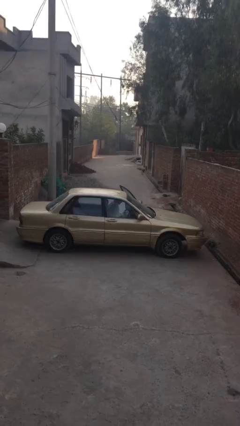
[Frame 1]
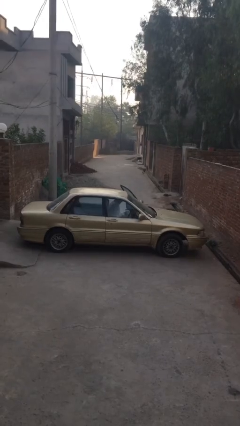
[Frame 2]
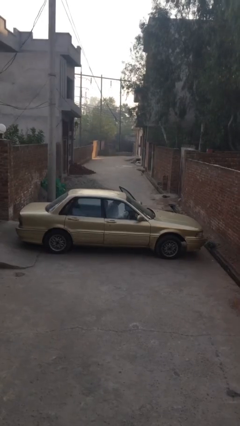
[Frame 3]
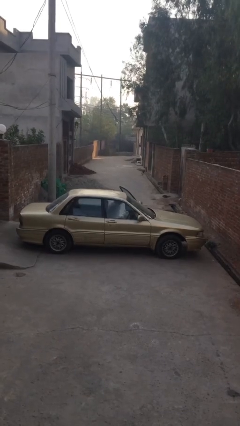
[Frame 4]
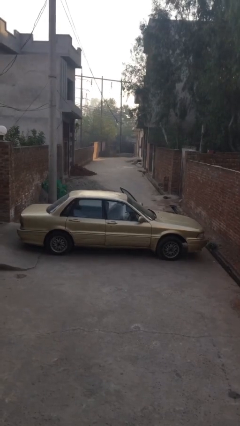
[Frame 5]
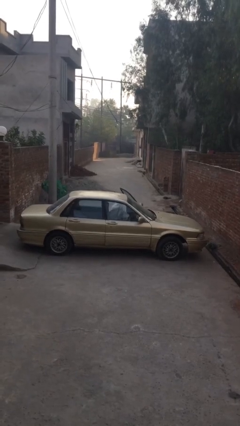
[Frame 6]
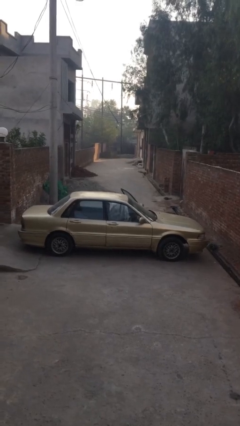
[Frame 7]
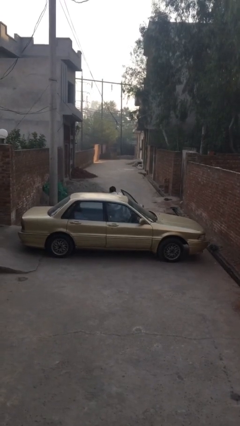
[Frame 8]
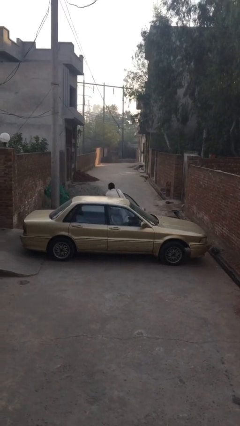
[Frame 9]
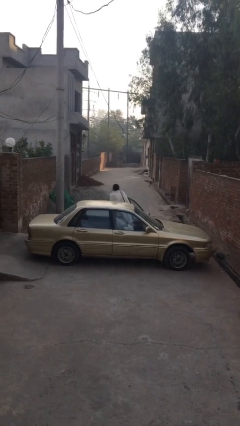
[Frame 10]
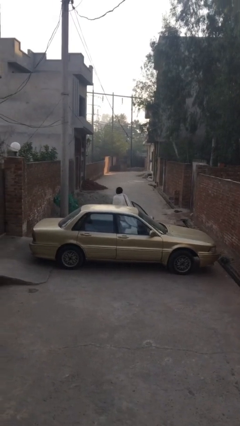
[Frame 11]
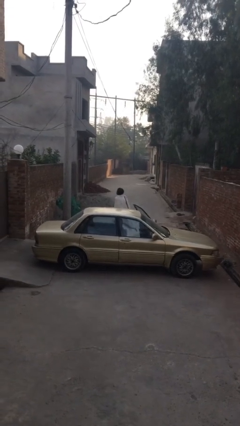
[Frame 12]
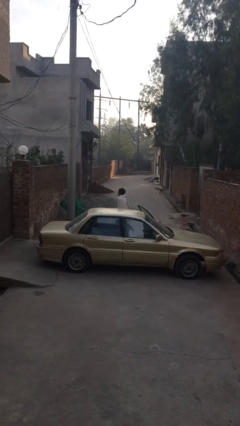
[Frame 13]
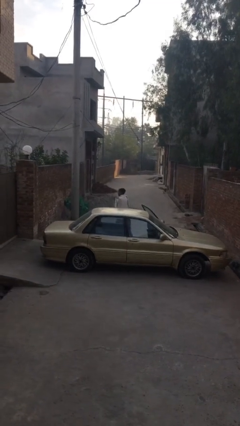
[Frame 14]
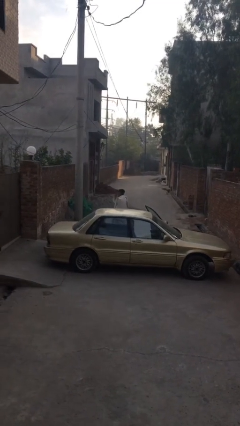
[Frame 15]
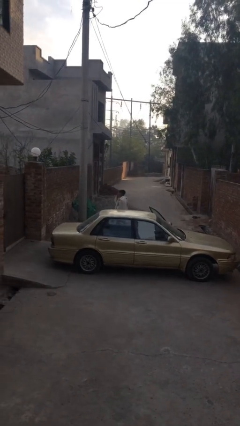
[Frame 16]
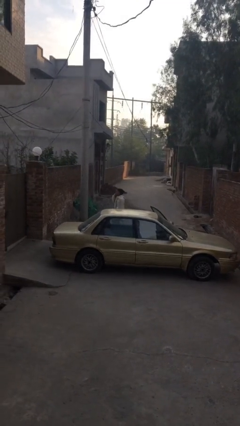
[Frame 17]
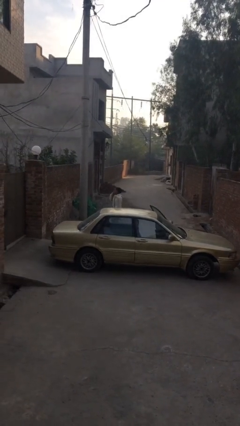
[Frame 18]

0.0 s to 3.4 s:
person exits car

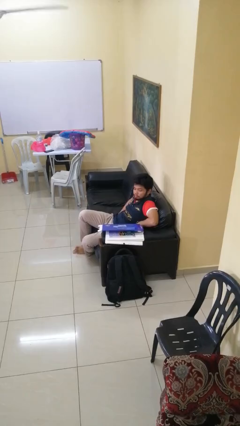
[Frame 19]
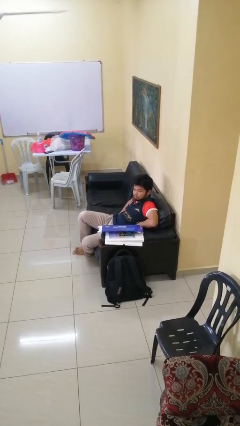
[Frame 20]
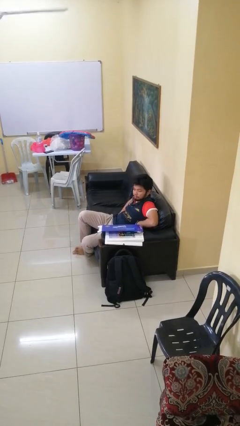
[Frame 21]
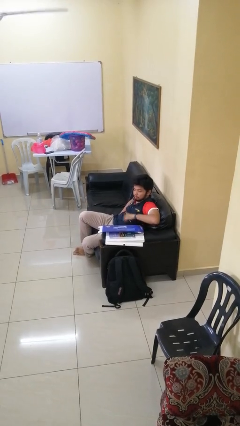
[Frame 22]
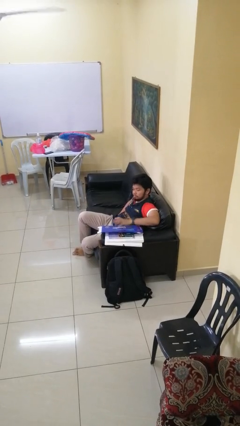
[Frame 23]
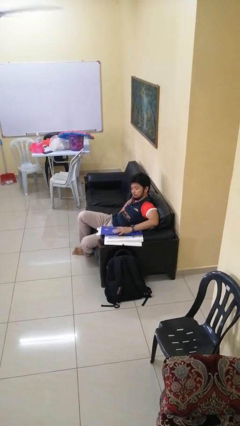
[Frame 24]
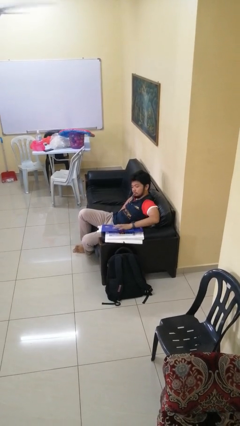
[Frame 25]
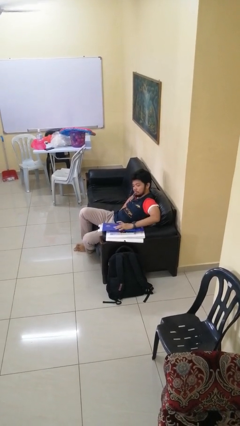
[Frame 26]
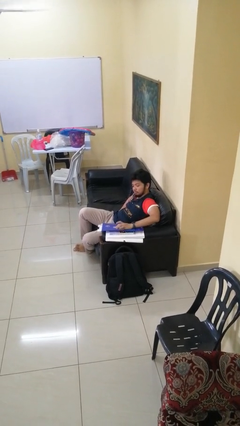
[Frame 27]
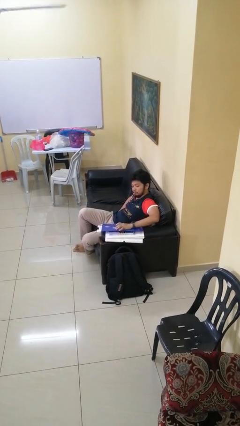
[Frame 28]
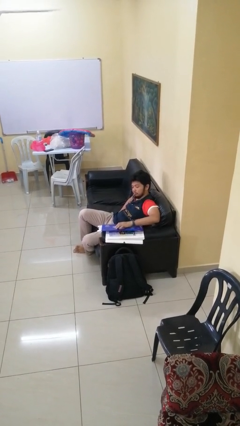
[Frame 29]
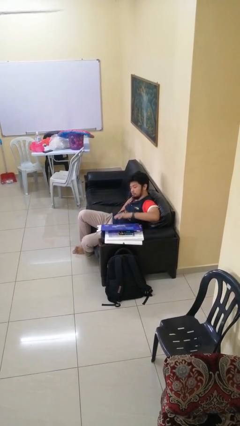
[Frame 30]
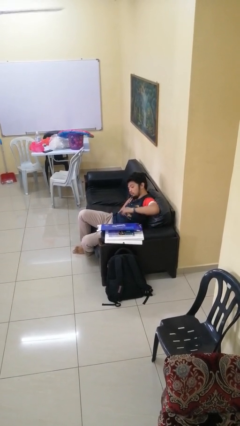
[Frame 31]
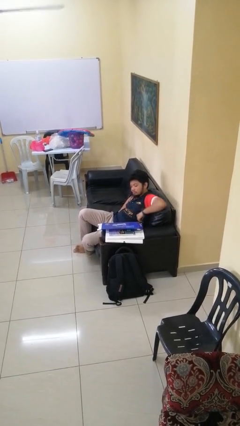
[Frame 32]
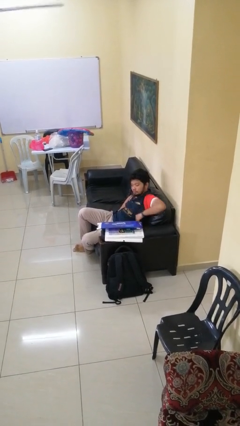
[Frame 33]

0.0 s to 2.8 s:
person taps object with finger

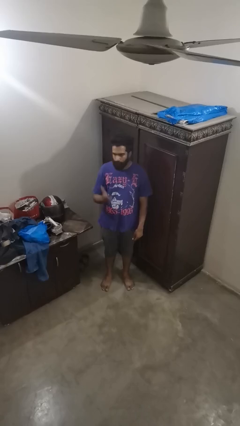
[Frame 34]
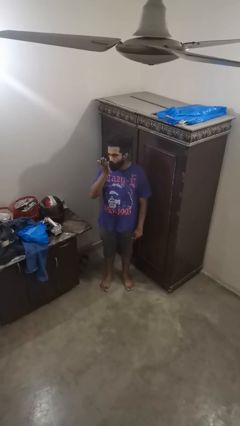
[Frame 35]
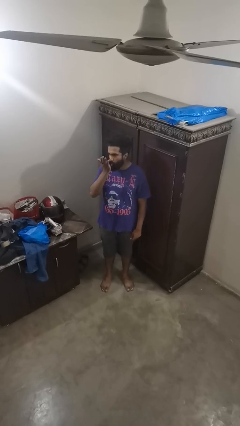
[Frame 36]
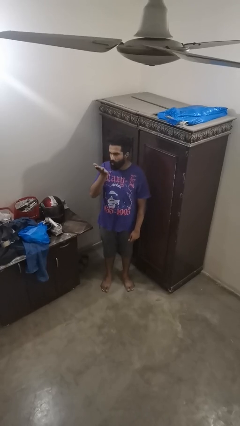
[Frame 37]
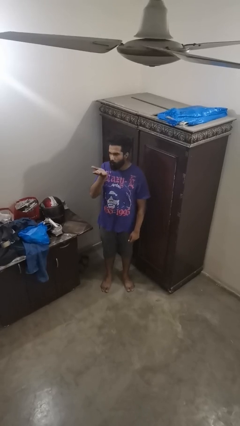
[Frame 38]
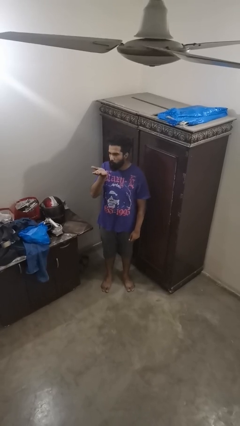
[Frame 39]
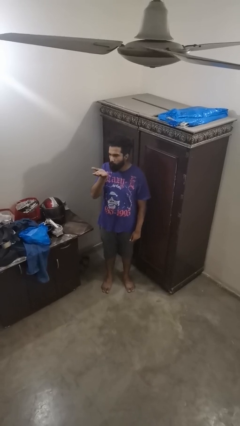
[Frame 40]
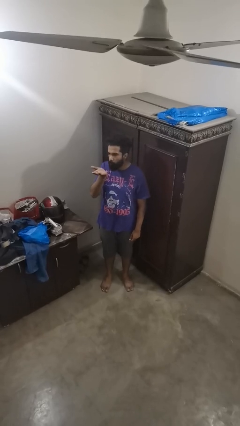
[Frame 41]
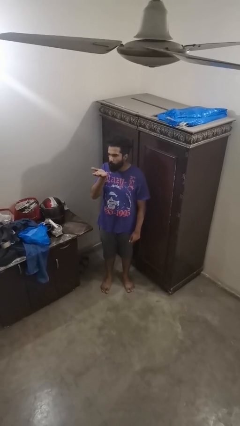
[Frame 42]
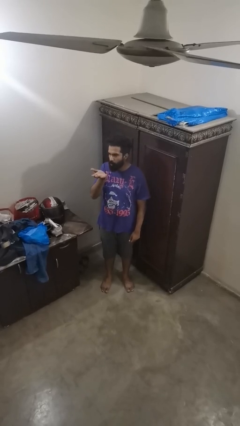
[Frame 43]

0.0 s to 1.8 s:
person gestures blow kiss

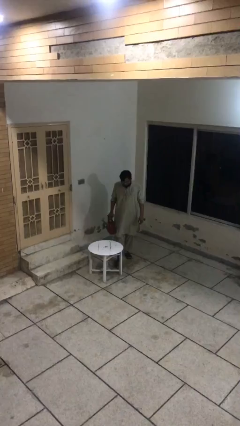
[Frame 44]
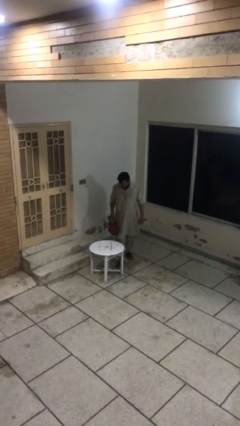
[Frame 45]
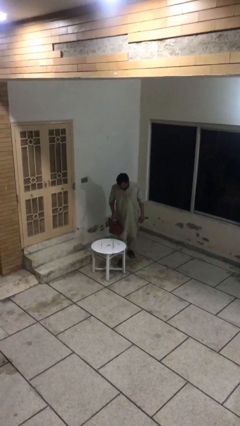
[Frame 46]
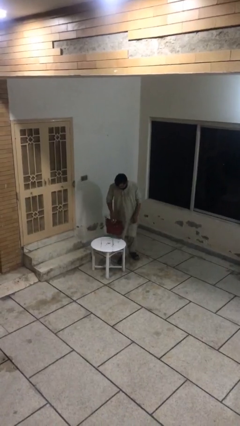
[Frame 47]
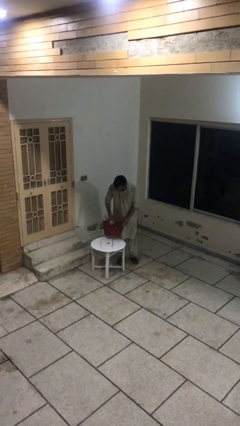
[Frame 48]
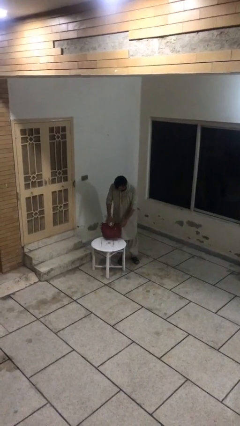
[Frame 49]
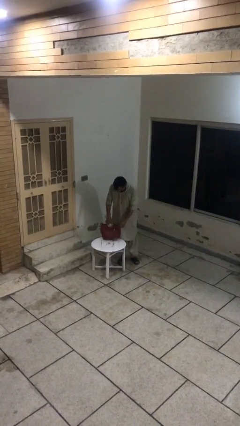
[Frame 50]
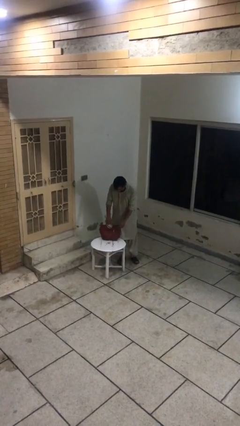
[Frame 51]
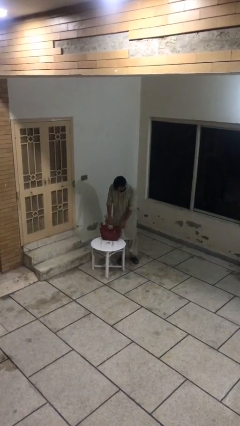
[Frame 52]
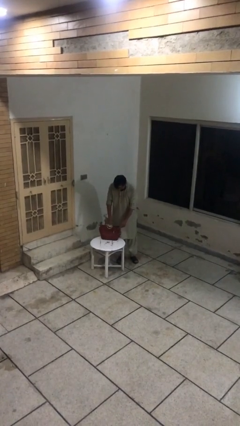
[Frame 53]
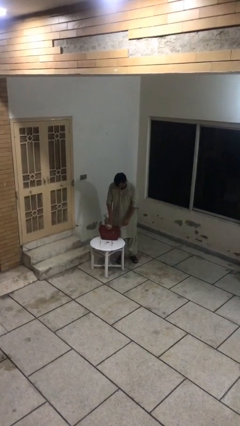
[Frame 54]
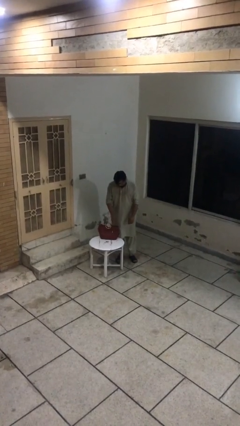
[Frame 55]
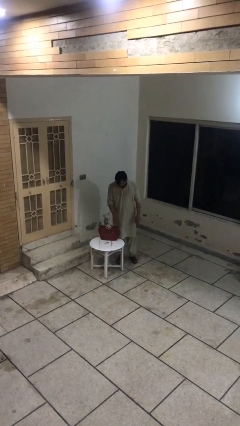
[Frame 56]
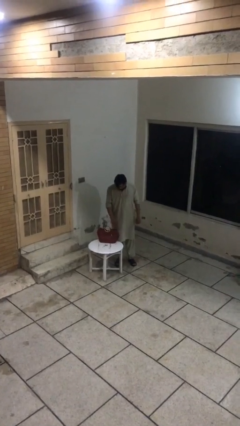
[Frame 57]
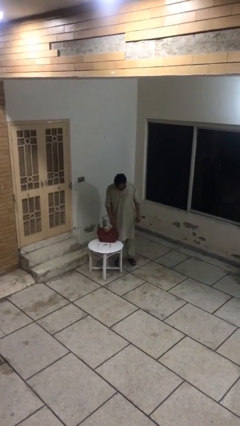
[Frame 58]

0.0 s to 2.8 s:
person puts down object on table

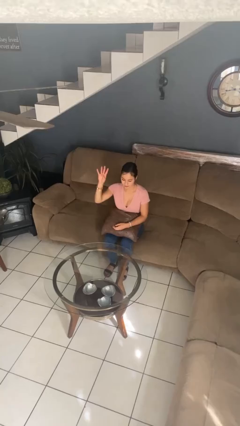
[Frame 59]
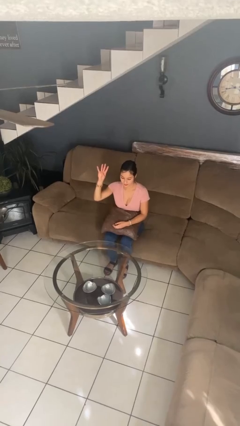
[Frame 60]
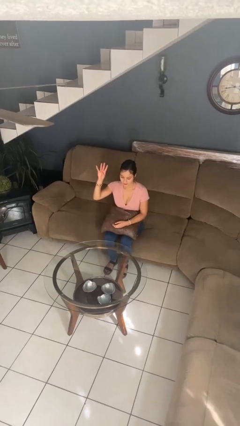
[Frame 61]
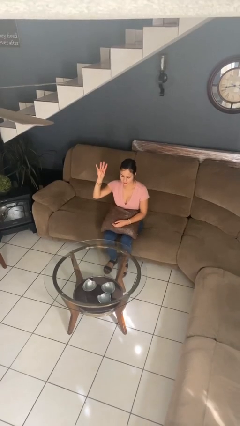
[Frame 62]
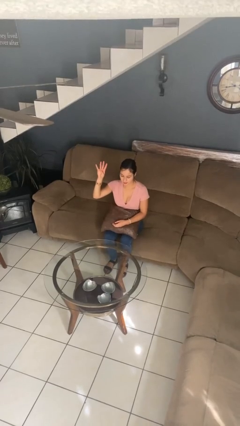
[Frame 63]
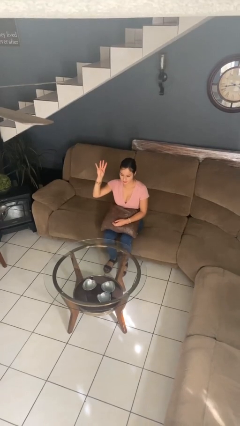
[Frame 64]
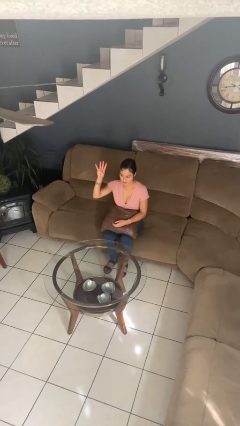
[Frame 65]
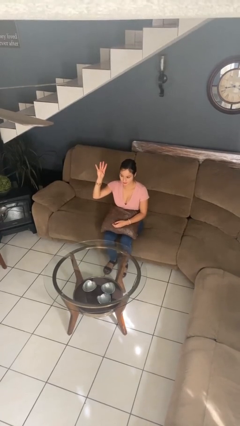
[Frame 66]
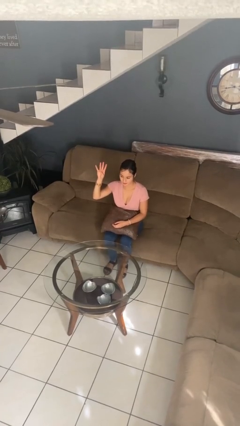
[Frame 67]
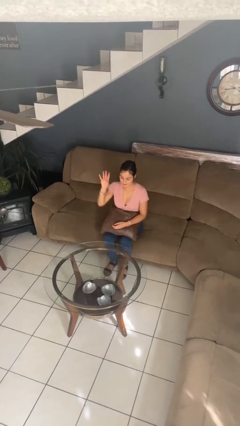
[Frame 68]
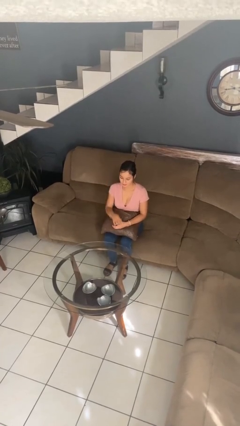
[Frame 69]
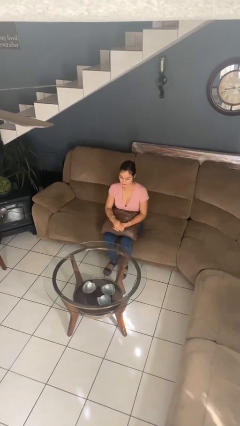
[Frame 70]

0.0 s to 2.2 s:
person gestures number four

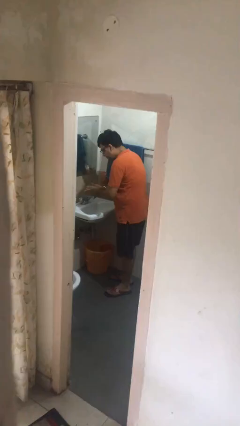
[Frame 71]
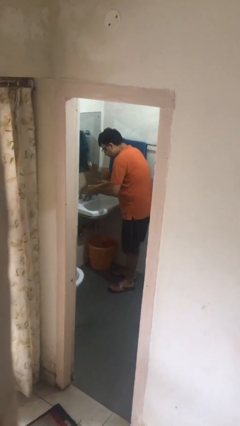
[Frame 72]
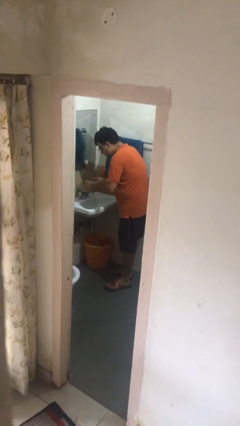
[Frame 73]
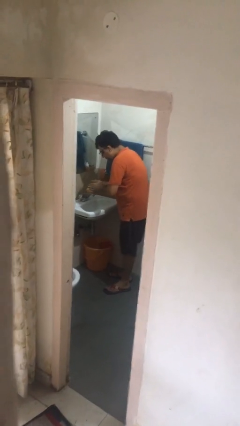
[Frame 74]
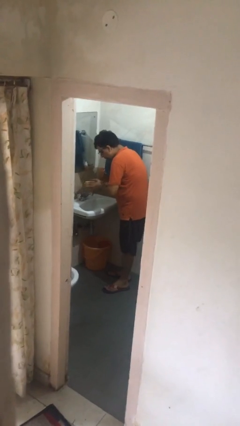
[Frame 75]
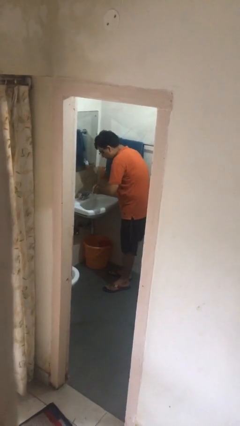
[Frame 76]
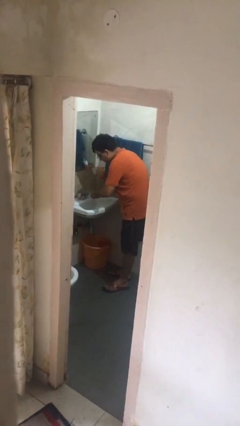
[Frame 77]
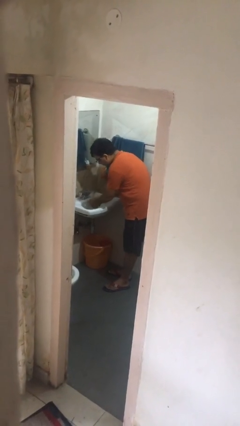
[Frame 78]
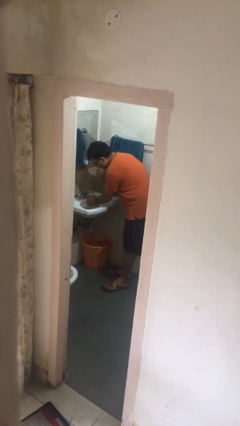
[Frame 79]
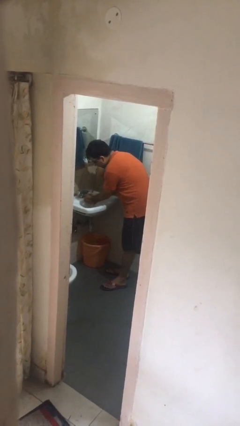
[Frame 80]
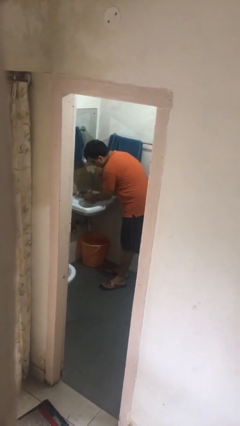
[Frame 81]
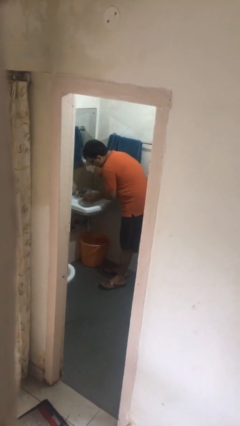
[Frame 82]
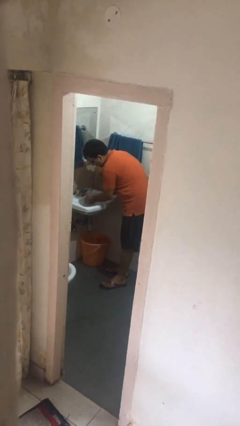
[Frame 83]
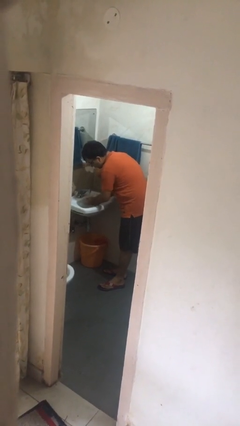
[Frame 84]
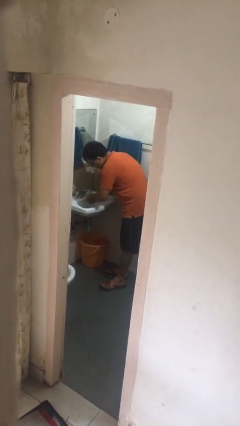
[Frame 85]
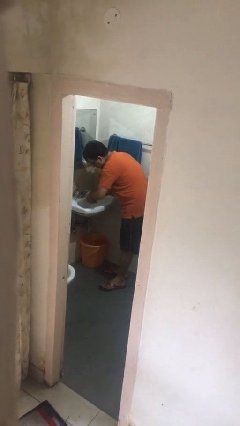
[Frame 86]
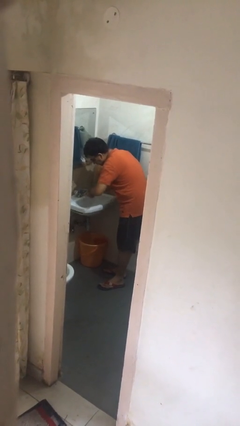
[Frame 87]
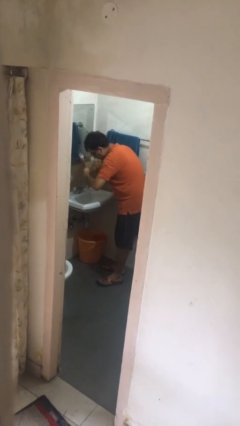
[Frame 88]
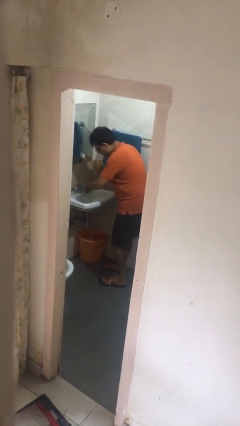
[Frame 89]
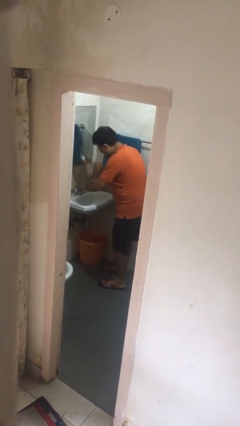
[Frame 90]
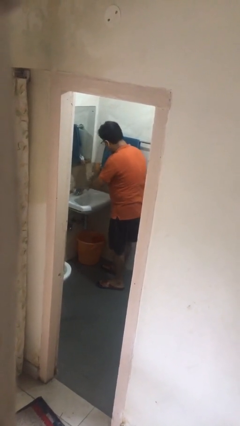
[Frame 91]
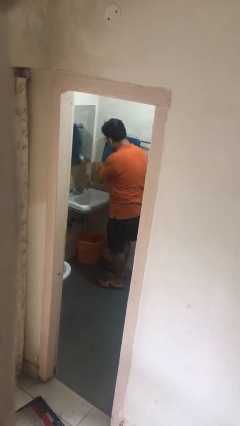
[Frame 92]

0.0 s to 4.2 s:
person washes hands
